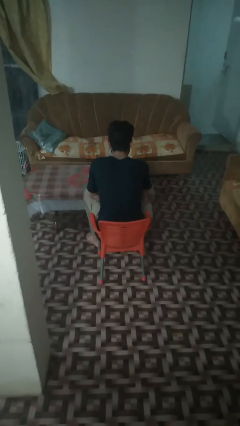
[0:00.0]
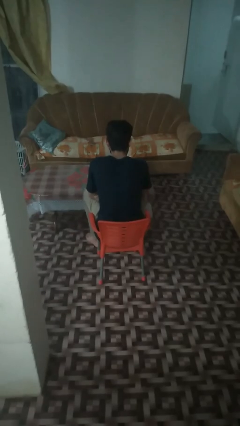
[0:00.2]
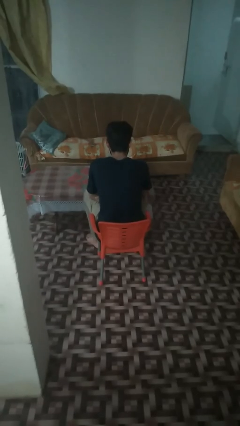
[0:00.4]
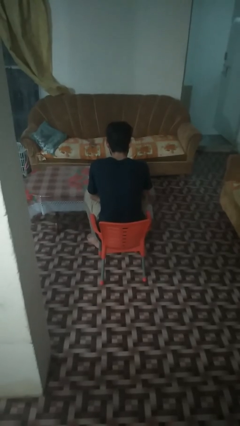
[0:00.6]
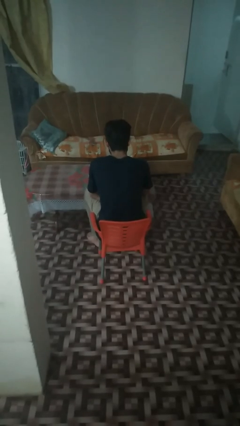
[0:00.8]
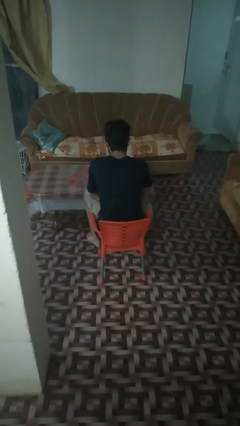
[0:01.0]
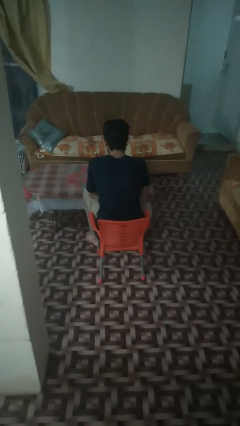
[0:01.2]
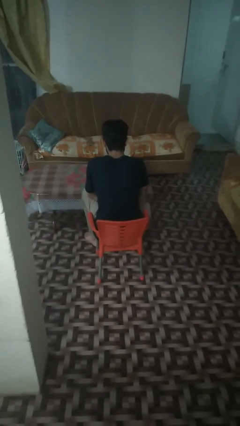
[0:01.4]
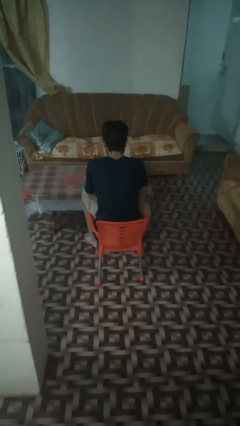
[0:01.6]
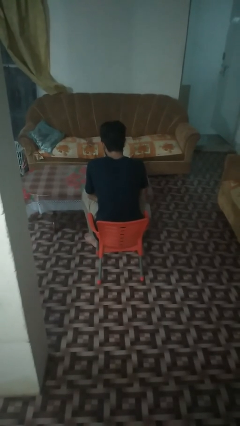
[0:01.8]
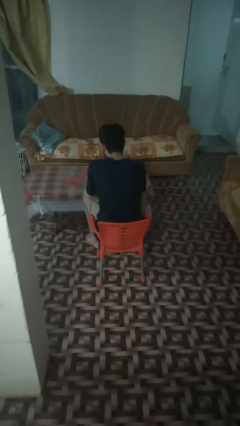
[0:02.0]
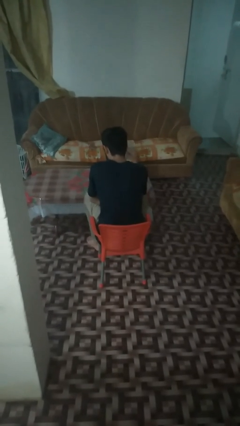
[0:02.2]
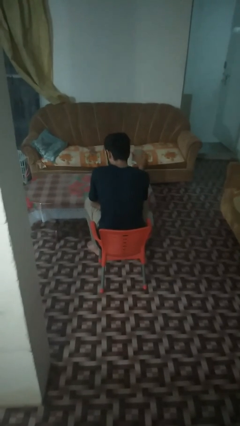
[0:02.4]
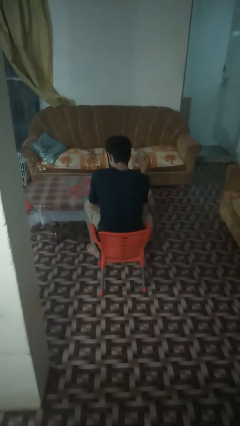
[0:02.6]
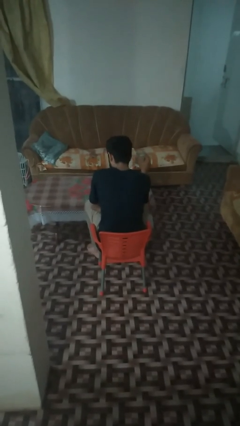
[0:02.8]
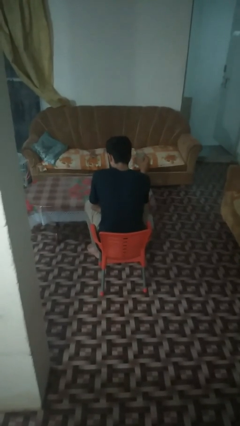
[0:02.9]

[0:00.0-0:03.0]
person picks up object from table

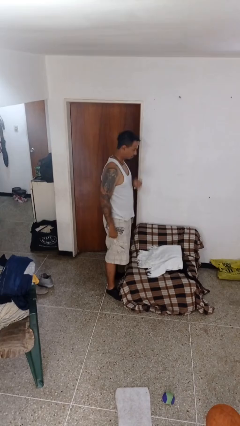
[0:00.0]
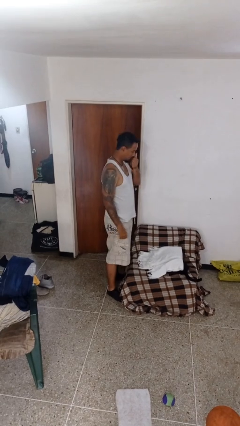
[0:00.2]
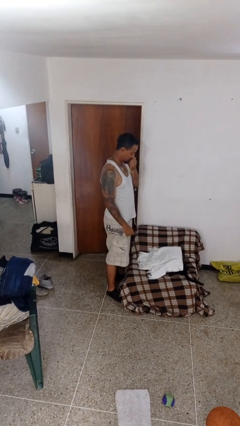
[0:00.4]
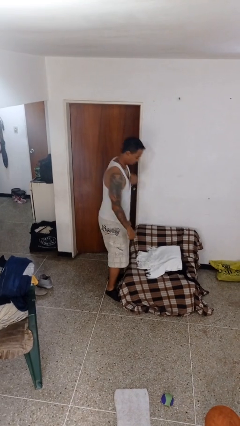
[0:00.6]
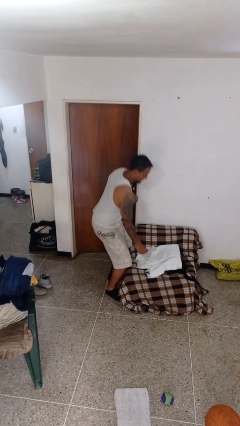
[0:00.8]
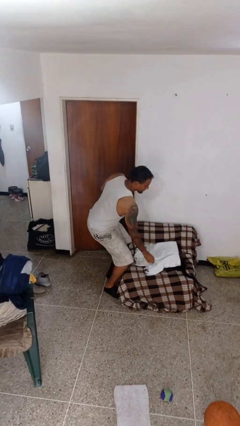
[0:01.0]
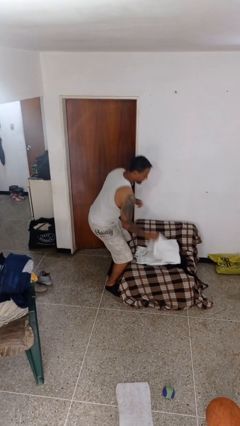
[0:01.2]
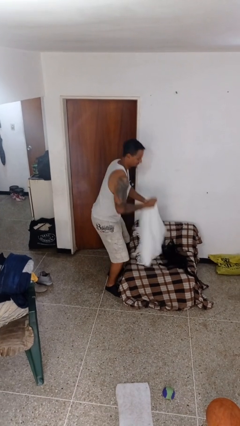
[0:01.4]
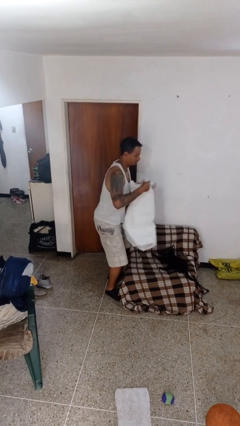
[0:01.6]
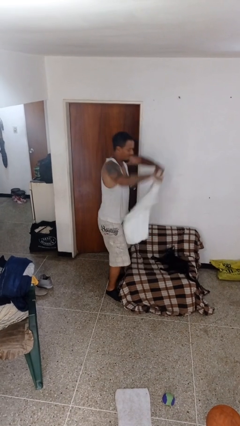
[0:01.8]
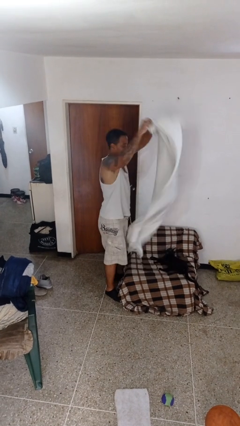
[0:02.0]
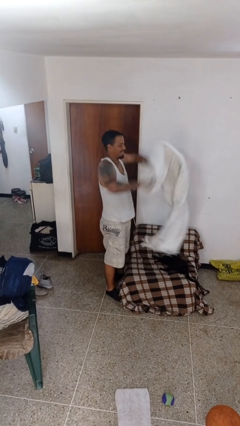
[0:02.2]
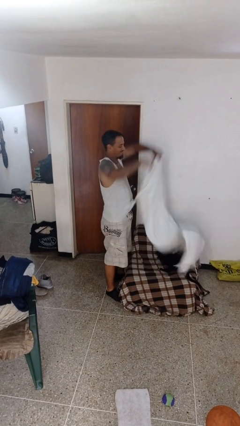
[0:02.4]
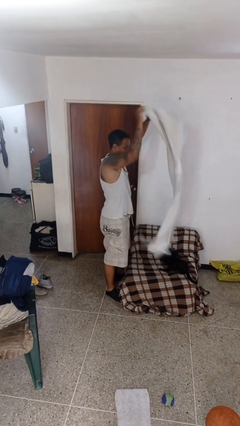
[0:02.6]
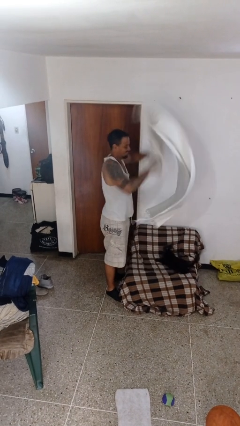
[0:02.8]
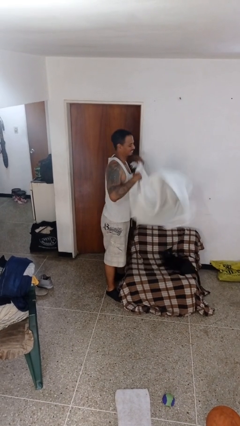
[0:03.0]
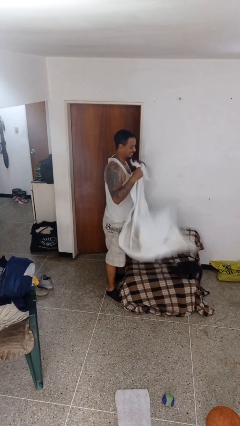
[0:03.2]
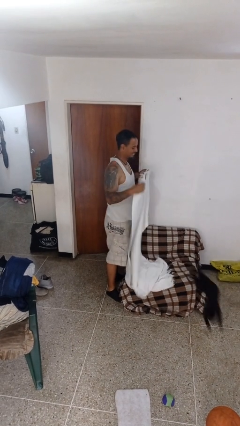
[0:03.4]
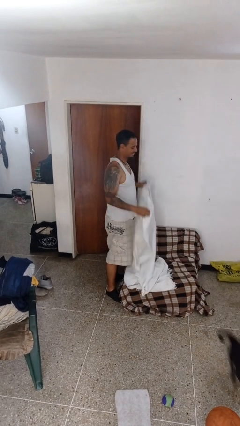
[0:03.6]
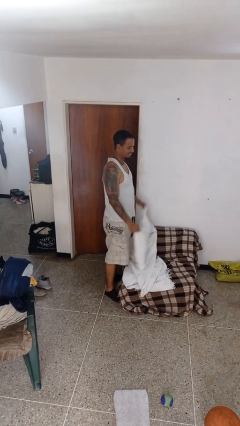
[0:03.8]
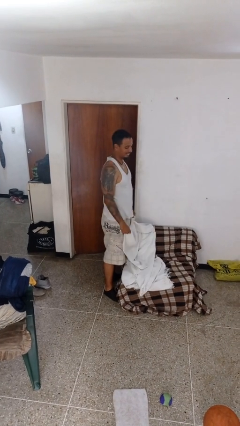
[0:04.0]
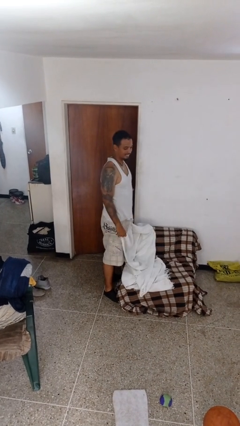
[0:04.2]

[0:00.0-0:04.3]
person unfolds blanket

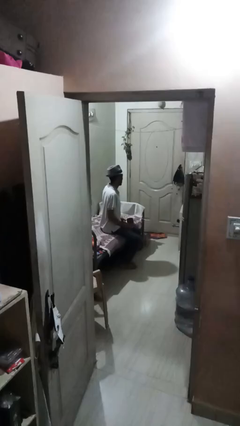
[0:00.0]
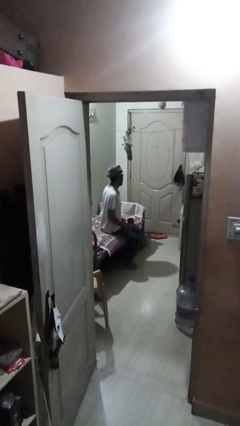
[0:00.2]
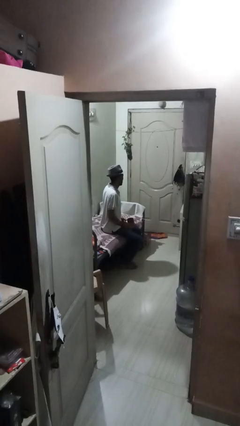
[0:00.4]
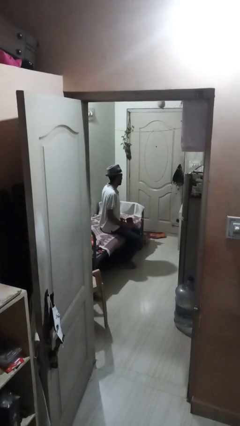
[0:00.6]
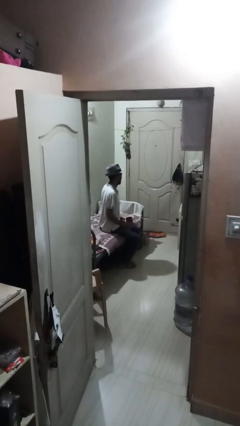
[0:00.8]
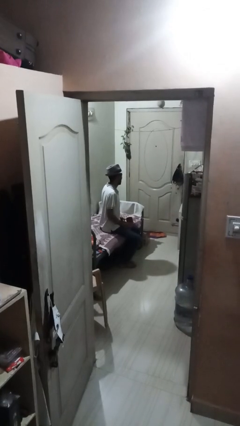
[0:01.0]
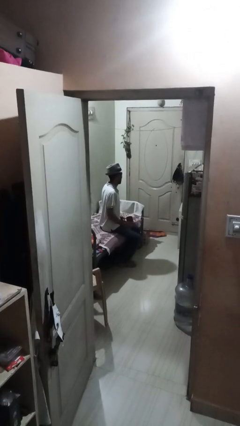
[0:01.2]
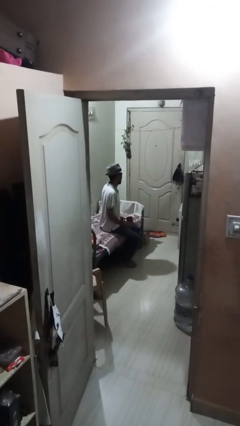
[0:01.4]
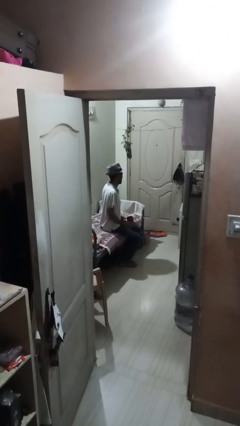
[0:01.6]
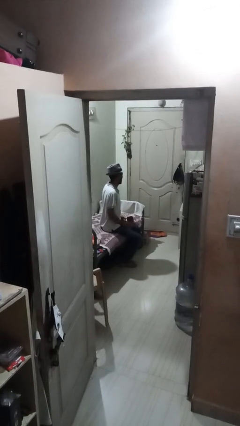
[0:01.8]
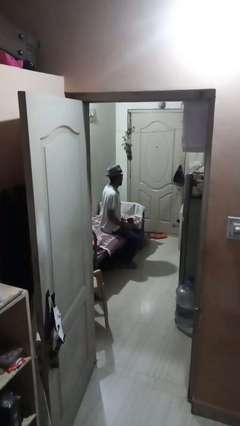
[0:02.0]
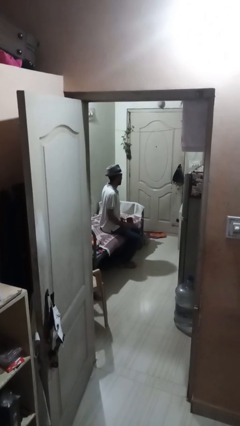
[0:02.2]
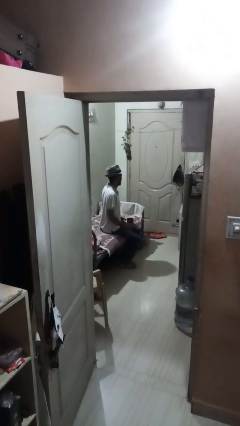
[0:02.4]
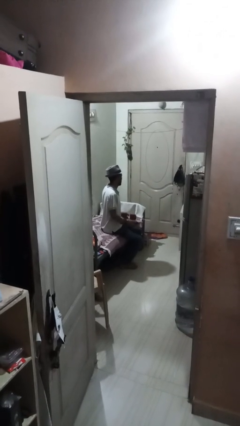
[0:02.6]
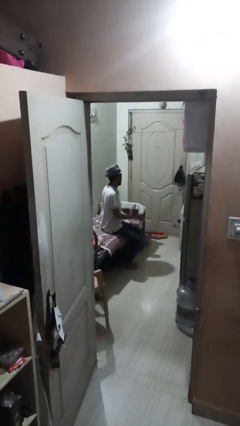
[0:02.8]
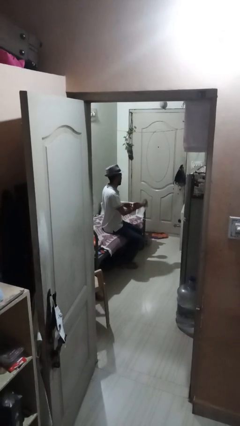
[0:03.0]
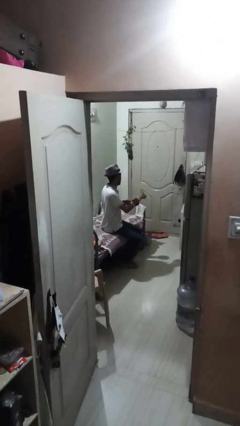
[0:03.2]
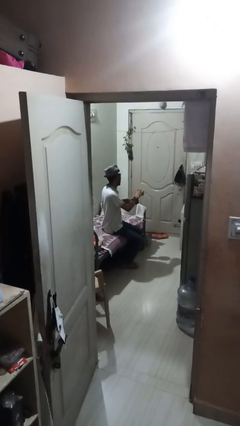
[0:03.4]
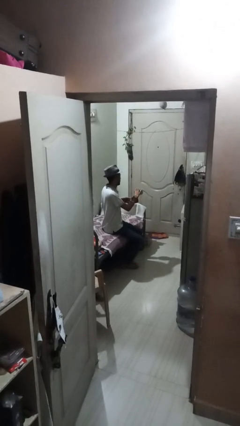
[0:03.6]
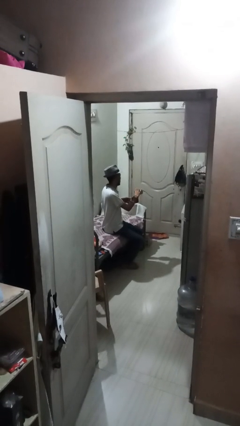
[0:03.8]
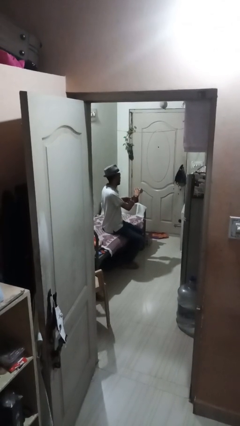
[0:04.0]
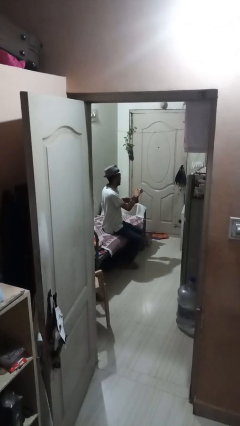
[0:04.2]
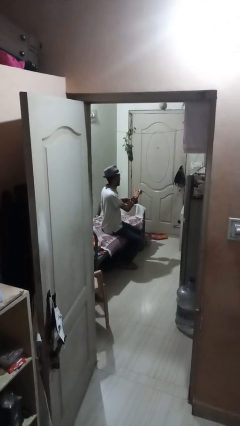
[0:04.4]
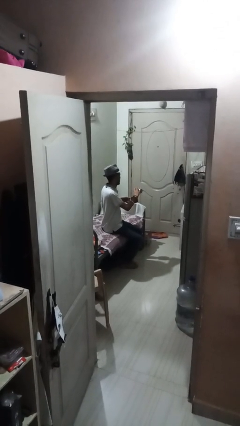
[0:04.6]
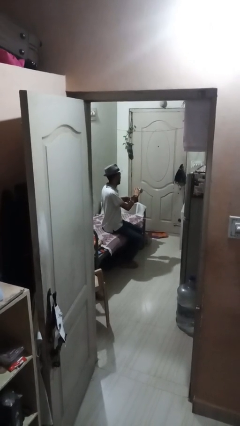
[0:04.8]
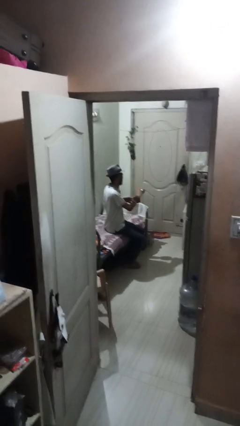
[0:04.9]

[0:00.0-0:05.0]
person pours coffee into mug

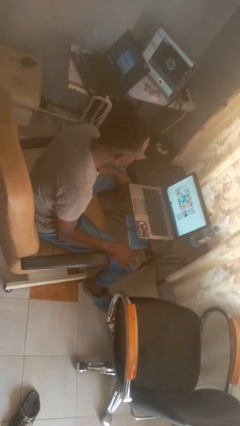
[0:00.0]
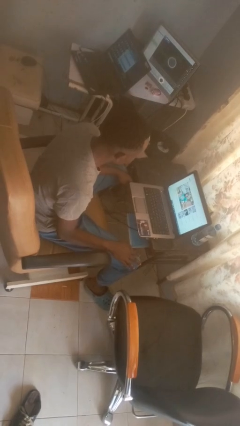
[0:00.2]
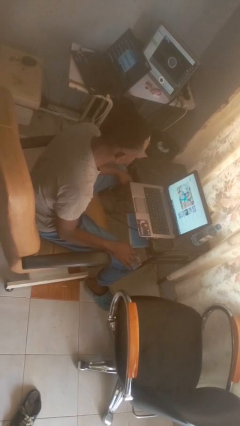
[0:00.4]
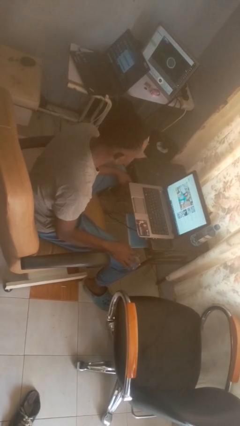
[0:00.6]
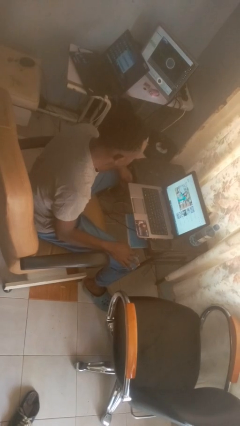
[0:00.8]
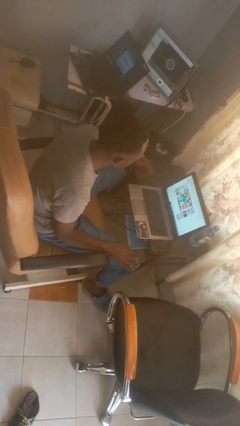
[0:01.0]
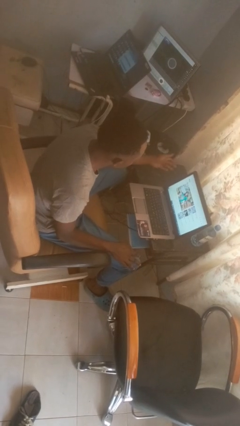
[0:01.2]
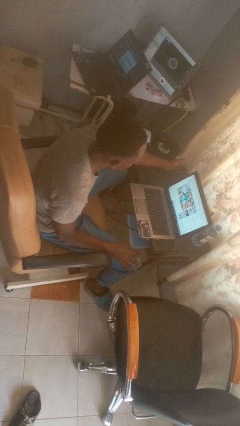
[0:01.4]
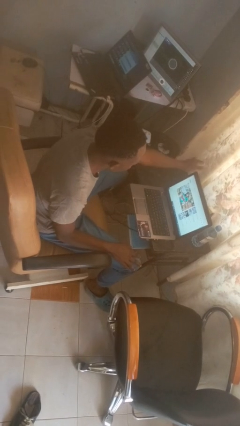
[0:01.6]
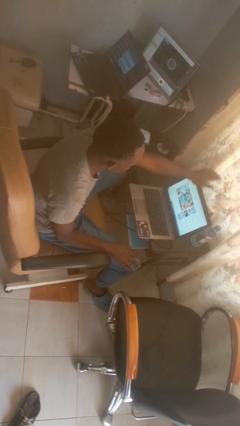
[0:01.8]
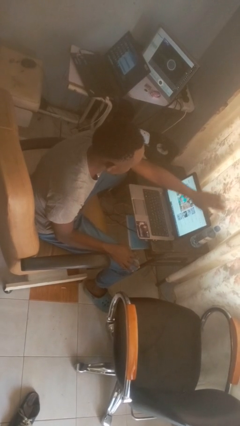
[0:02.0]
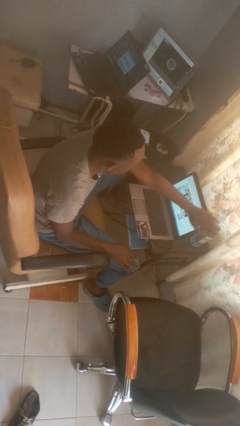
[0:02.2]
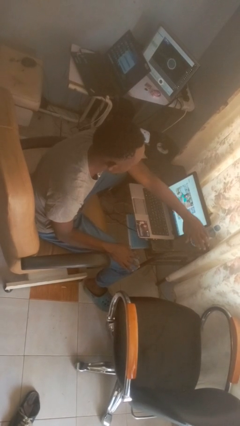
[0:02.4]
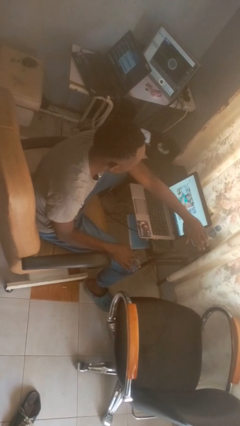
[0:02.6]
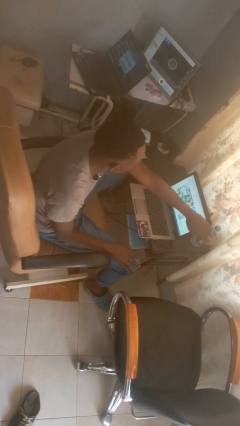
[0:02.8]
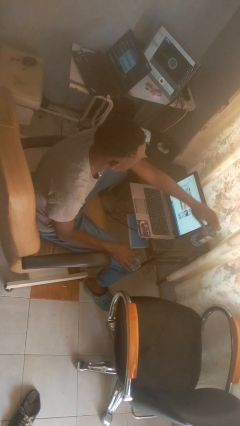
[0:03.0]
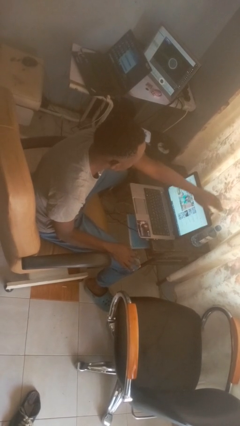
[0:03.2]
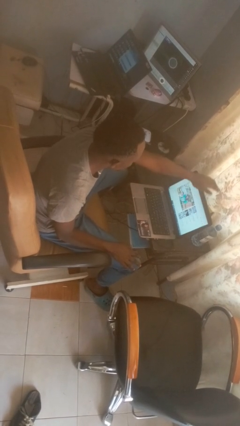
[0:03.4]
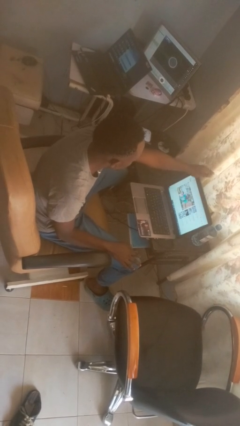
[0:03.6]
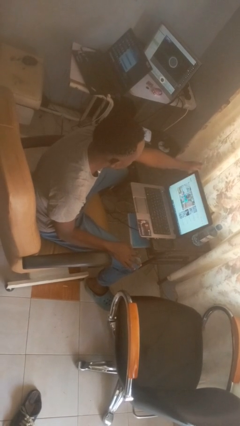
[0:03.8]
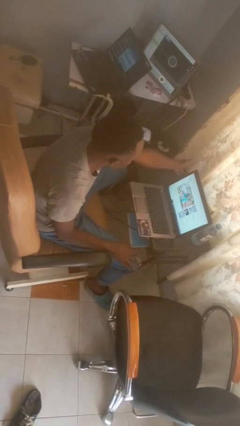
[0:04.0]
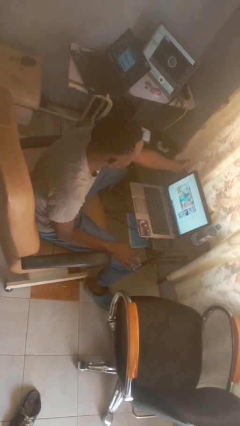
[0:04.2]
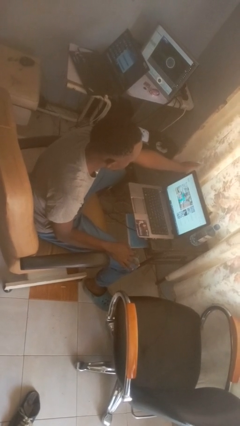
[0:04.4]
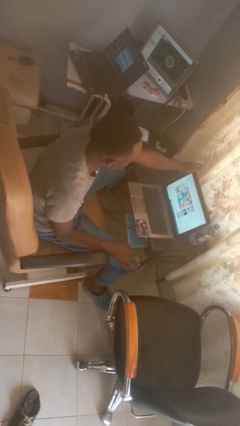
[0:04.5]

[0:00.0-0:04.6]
person waves hand over object

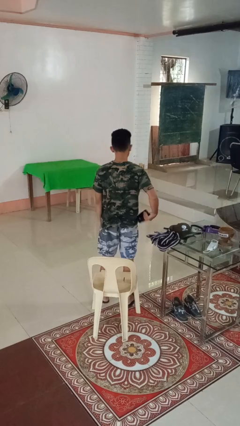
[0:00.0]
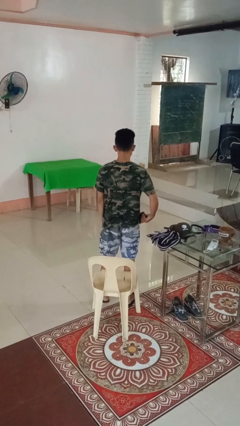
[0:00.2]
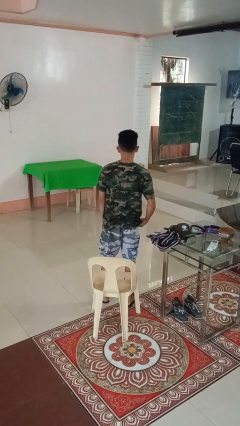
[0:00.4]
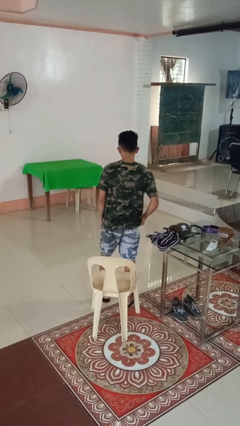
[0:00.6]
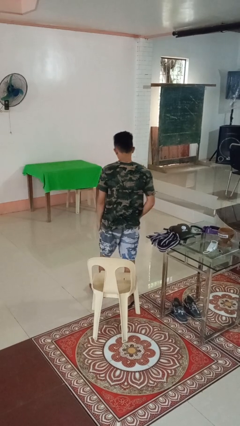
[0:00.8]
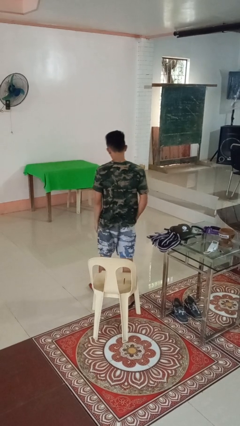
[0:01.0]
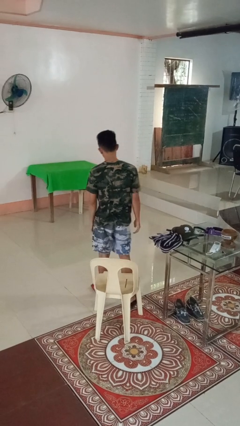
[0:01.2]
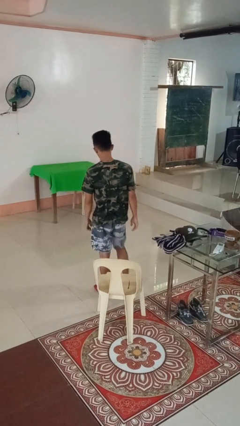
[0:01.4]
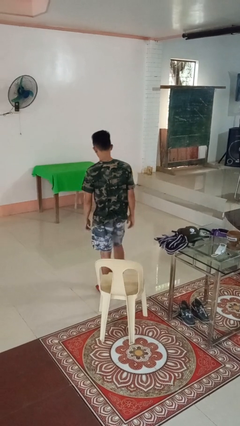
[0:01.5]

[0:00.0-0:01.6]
person puts phone into pocket
